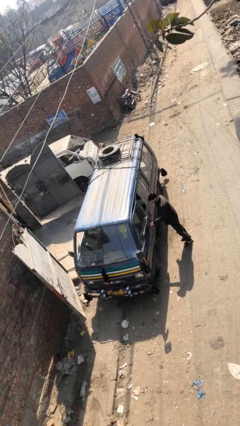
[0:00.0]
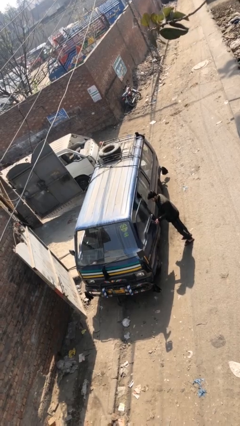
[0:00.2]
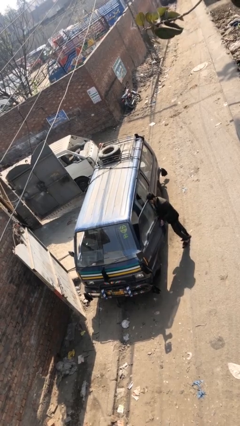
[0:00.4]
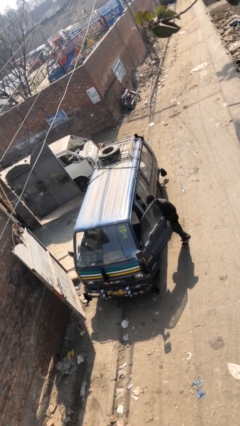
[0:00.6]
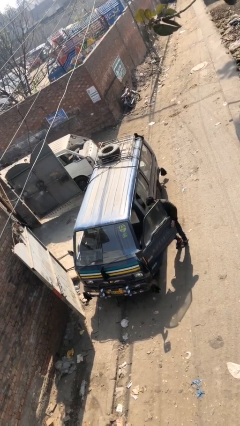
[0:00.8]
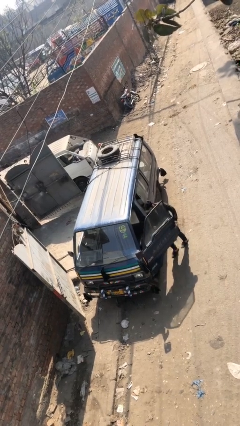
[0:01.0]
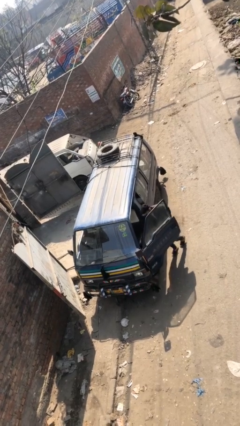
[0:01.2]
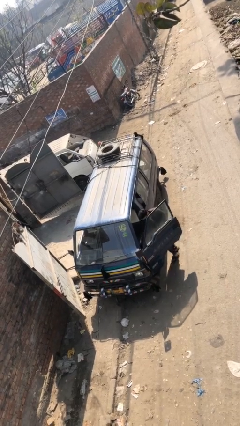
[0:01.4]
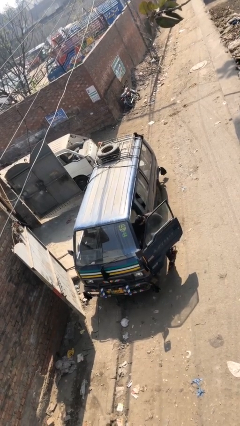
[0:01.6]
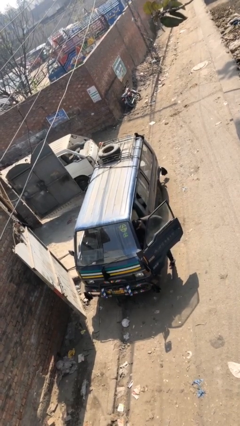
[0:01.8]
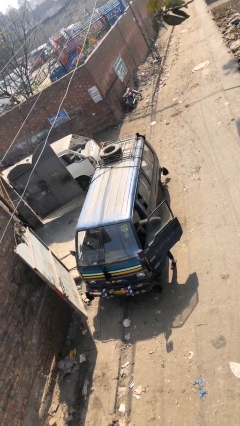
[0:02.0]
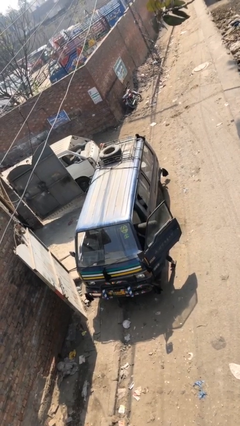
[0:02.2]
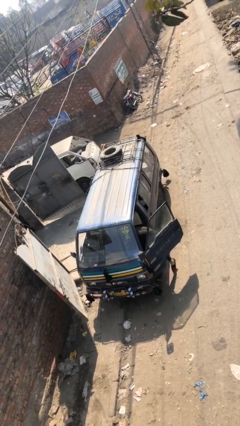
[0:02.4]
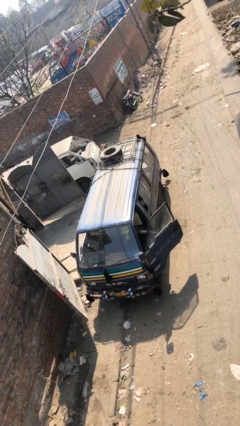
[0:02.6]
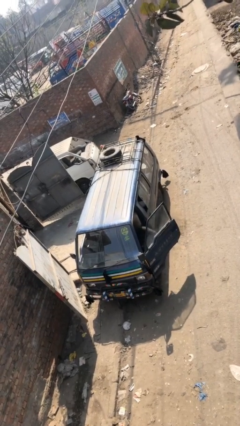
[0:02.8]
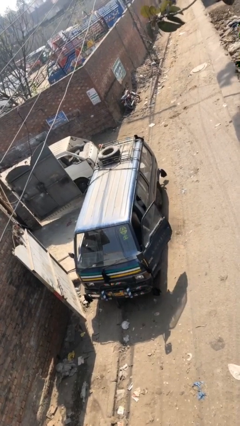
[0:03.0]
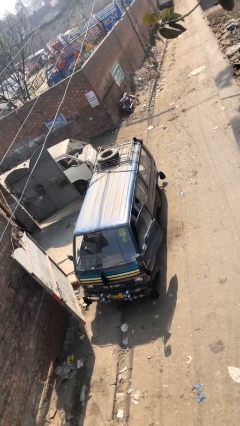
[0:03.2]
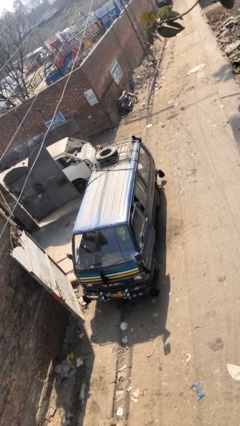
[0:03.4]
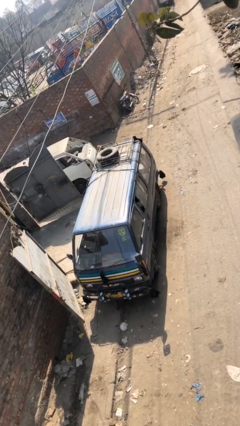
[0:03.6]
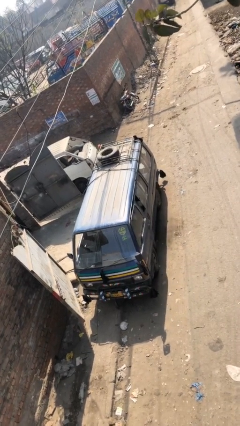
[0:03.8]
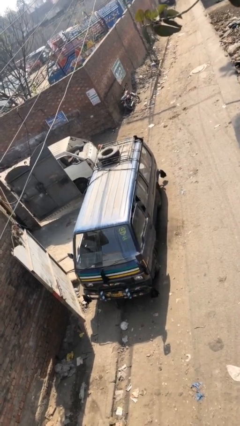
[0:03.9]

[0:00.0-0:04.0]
car picks up person

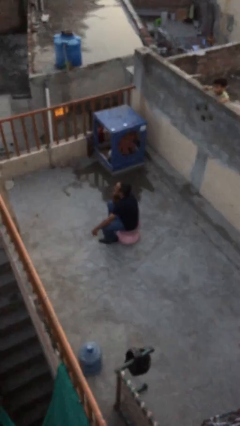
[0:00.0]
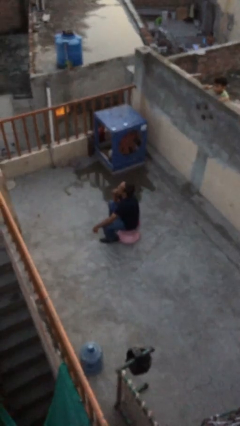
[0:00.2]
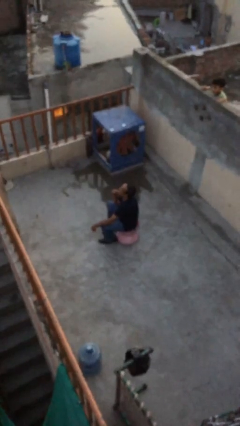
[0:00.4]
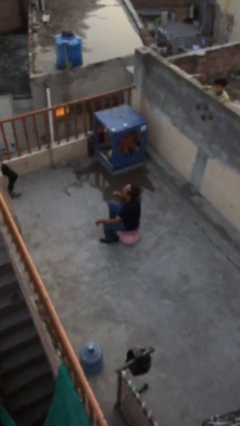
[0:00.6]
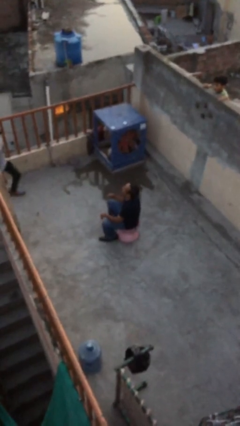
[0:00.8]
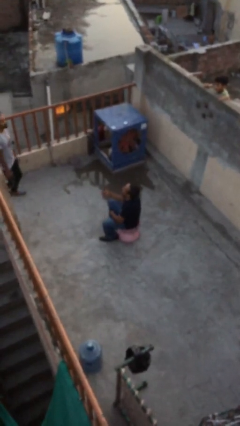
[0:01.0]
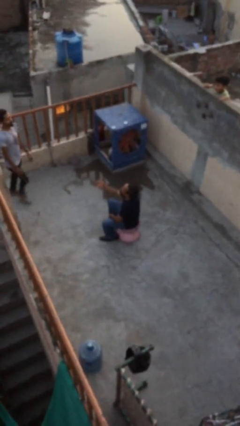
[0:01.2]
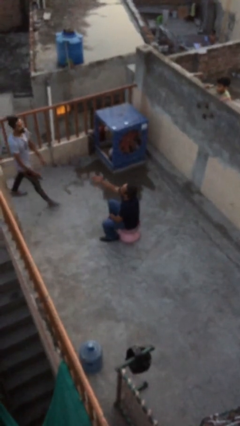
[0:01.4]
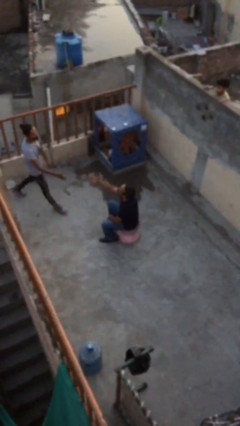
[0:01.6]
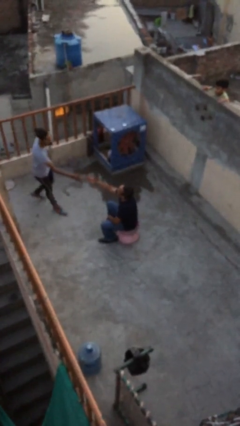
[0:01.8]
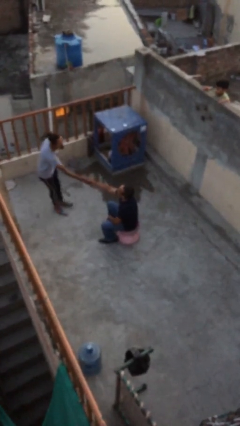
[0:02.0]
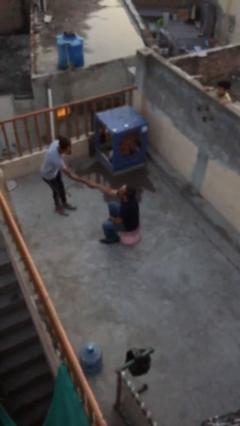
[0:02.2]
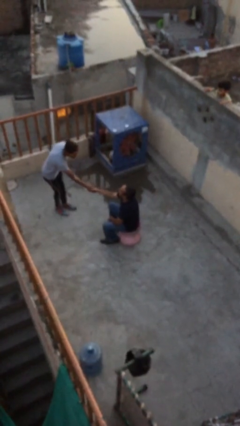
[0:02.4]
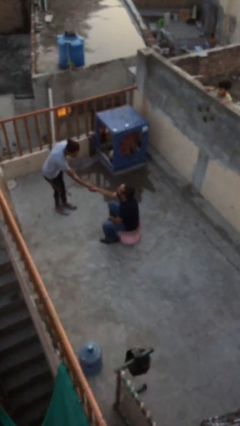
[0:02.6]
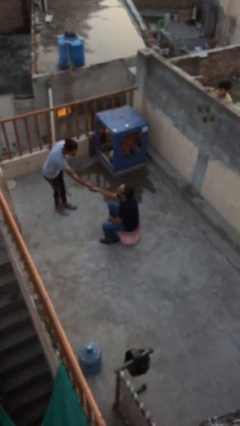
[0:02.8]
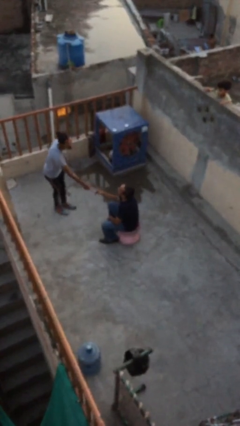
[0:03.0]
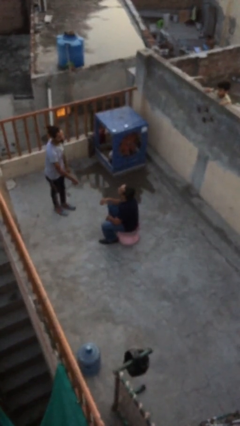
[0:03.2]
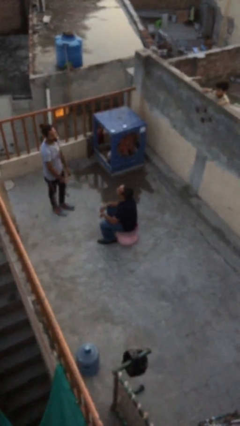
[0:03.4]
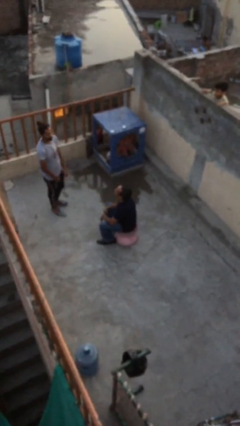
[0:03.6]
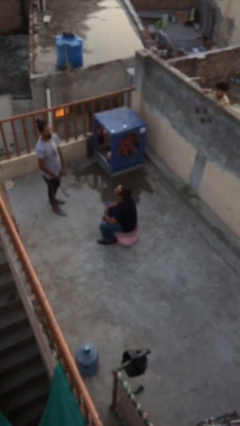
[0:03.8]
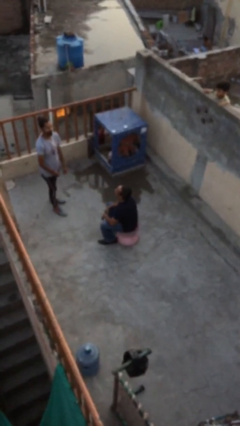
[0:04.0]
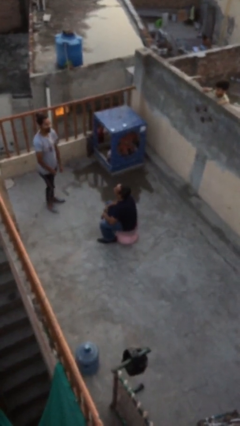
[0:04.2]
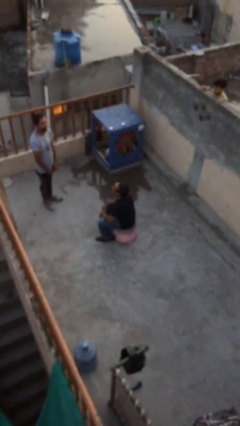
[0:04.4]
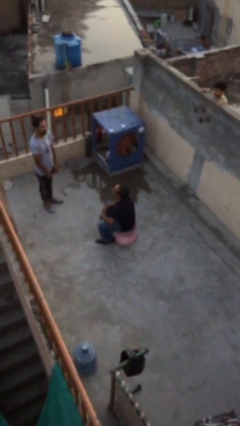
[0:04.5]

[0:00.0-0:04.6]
person shakes hand

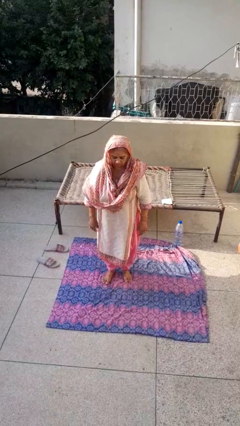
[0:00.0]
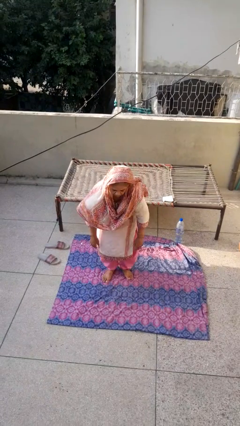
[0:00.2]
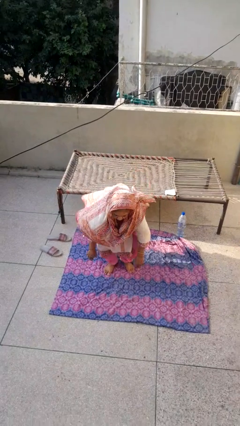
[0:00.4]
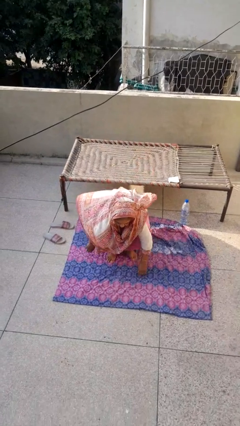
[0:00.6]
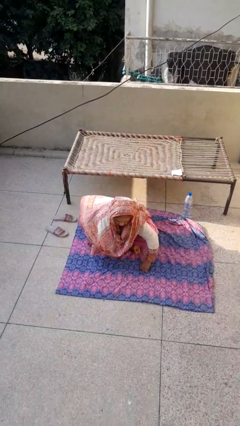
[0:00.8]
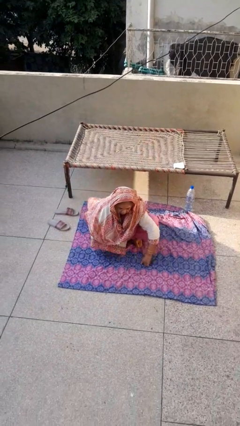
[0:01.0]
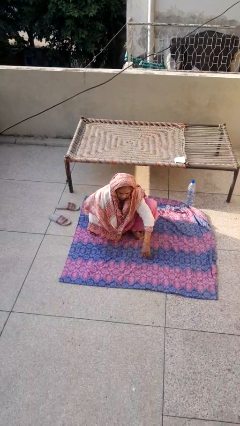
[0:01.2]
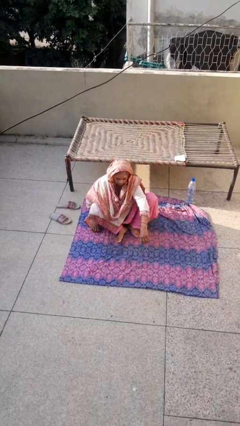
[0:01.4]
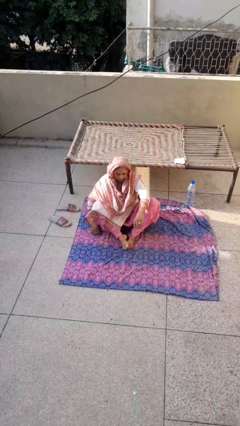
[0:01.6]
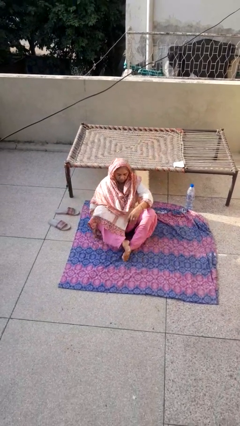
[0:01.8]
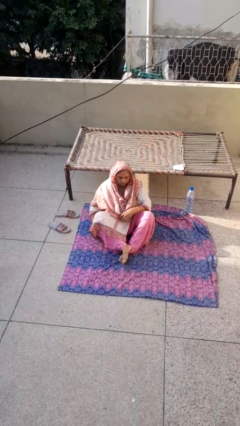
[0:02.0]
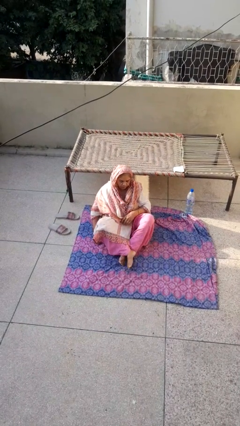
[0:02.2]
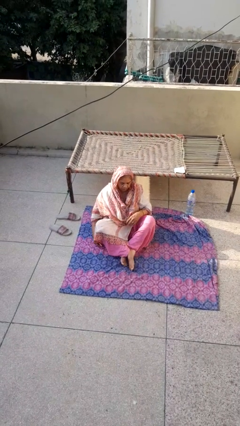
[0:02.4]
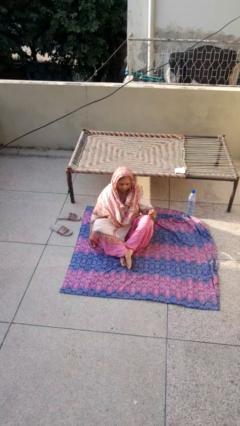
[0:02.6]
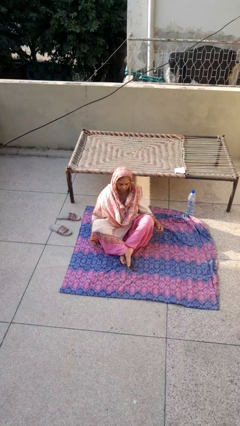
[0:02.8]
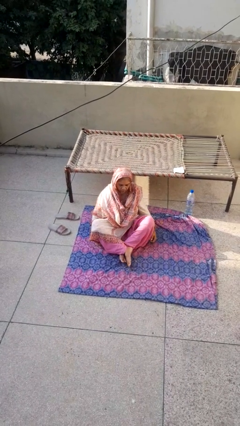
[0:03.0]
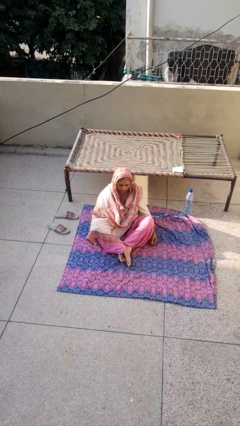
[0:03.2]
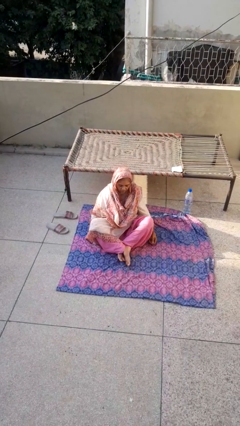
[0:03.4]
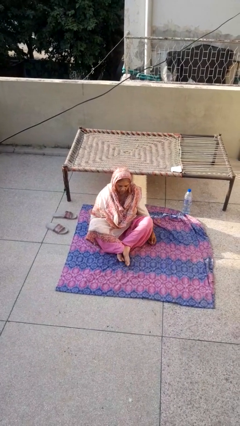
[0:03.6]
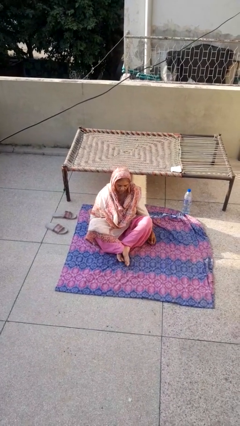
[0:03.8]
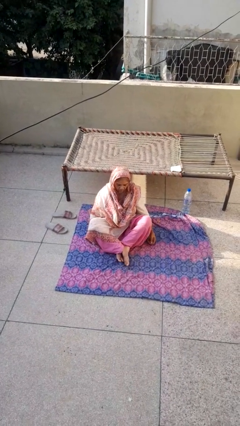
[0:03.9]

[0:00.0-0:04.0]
person sits crisscross

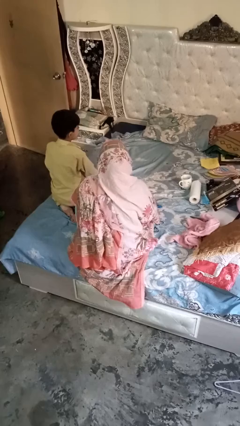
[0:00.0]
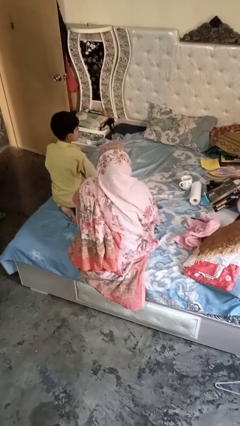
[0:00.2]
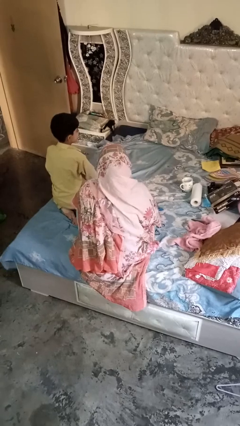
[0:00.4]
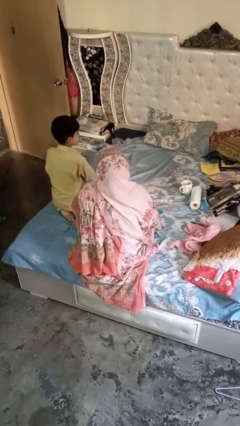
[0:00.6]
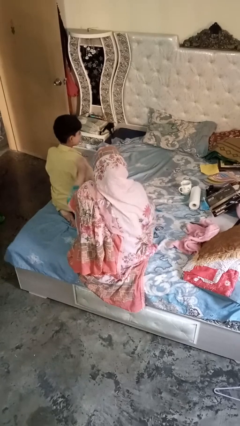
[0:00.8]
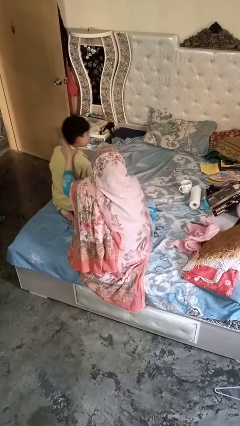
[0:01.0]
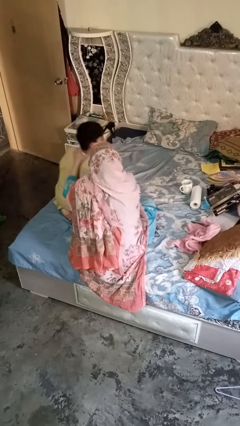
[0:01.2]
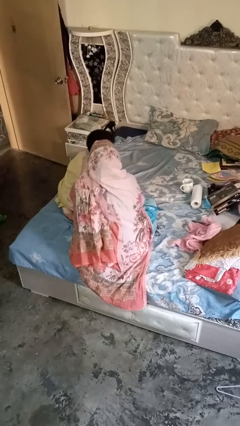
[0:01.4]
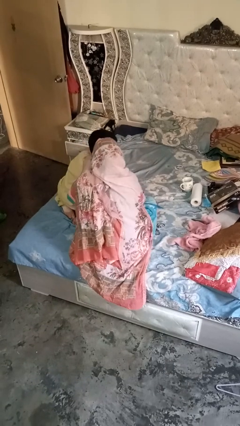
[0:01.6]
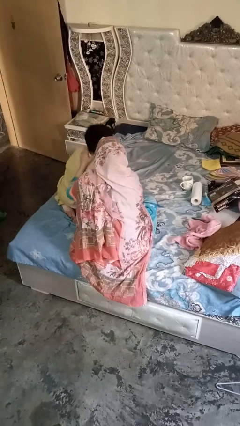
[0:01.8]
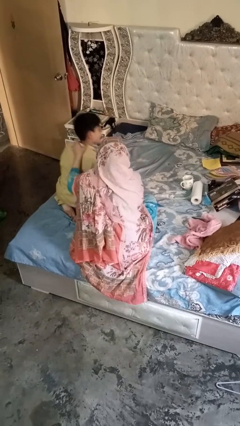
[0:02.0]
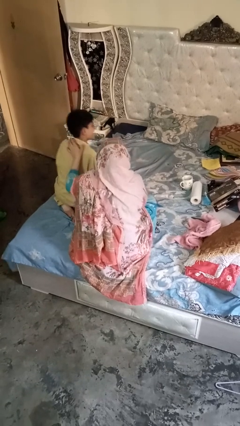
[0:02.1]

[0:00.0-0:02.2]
person gestures blow kiss

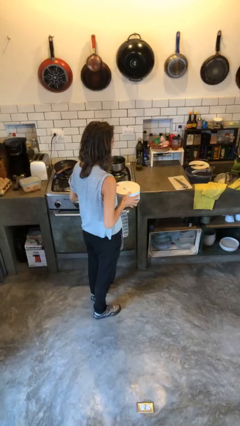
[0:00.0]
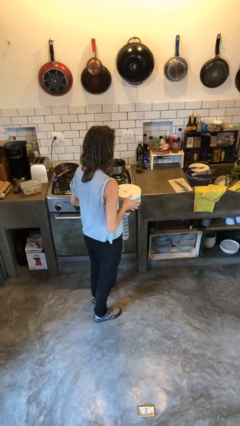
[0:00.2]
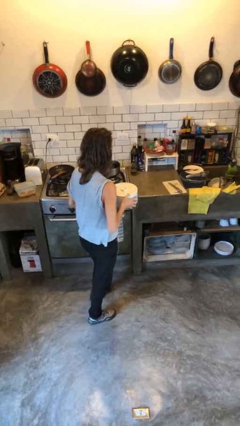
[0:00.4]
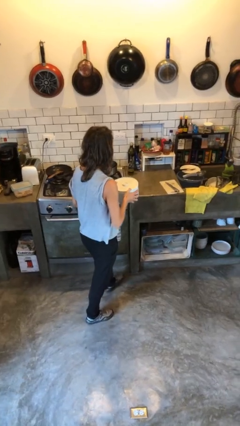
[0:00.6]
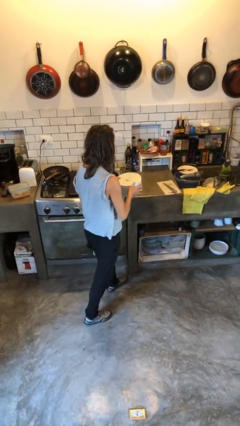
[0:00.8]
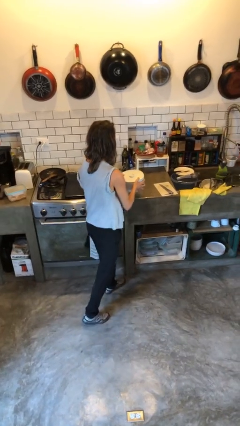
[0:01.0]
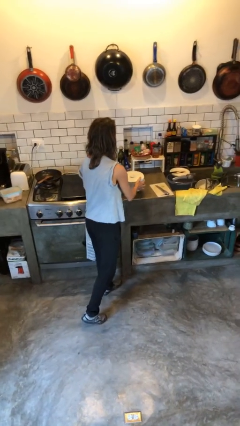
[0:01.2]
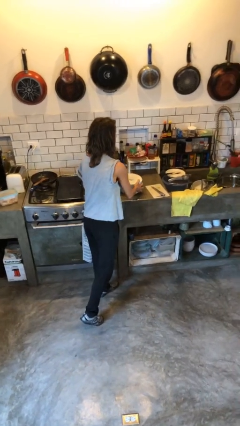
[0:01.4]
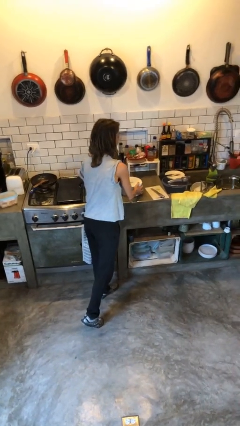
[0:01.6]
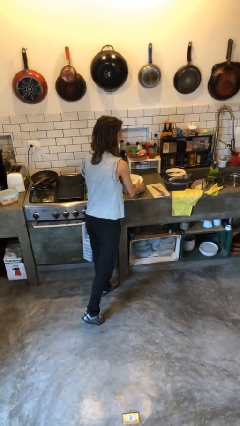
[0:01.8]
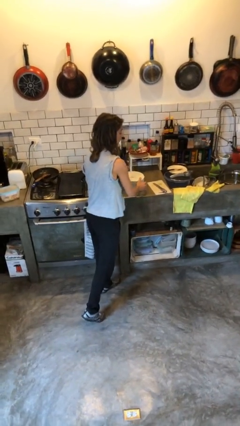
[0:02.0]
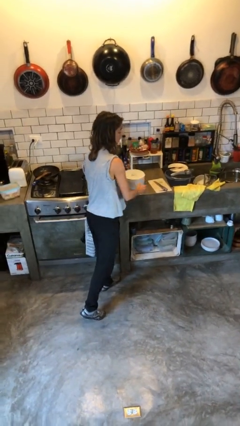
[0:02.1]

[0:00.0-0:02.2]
person puts down object on countertop

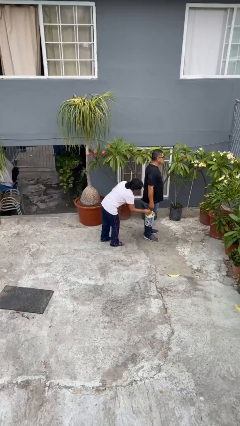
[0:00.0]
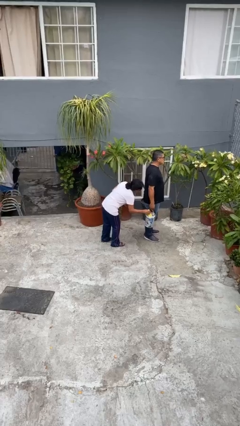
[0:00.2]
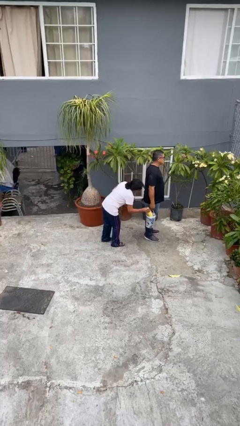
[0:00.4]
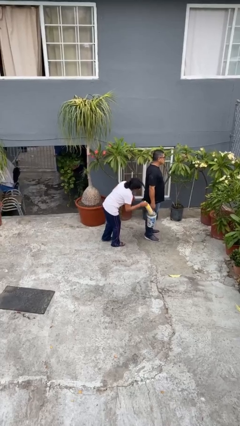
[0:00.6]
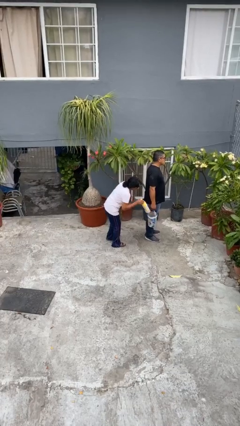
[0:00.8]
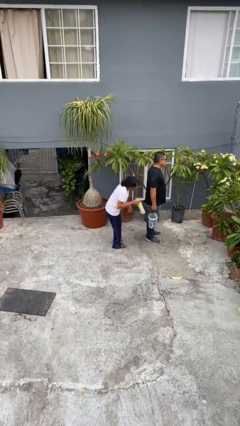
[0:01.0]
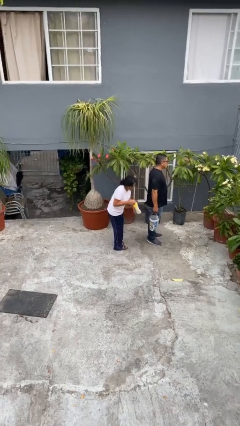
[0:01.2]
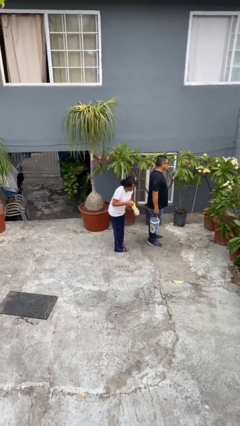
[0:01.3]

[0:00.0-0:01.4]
person steals object from person
